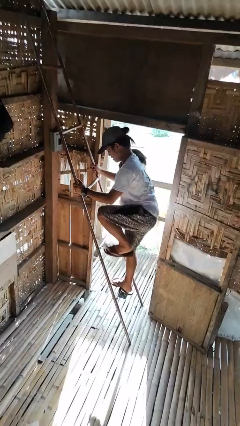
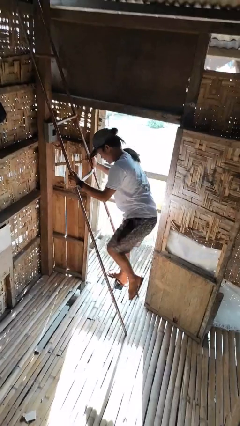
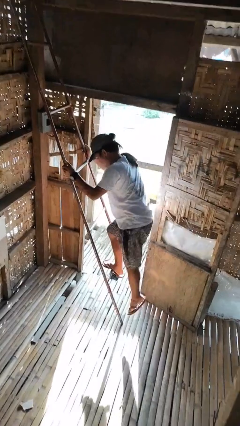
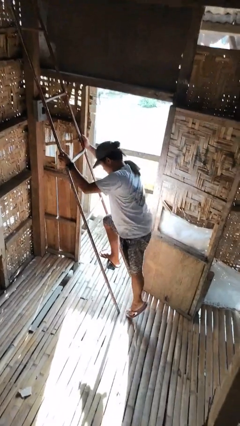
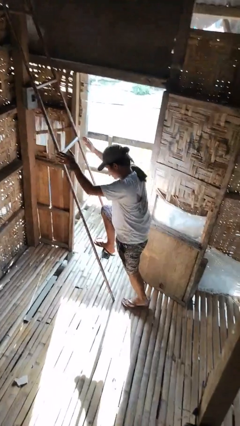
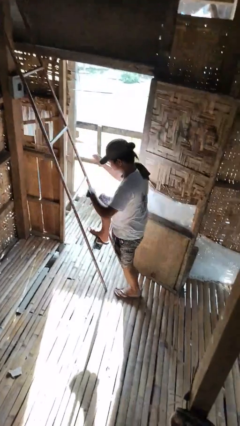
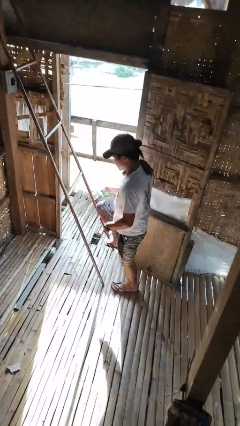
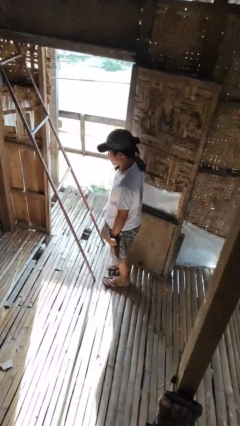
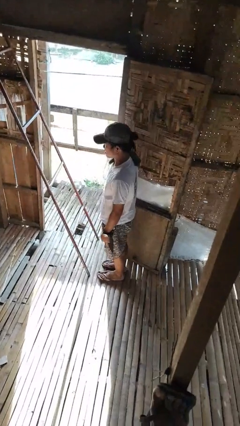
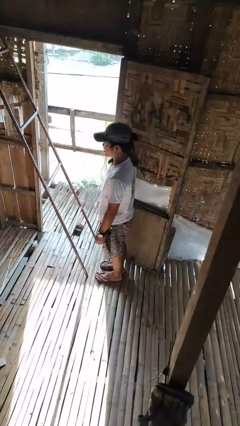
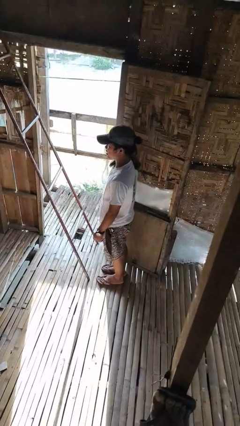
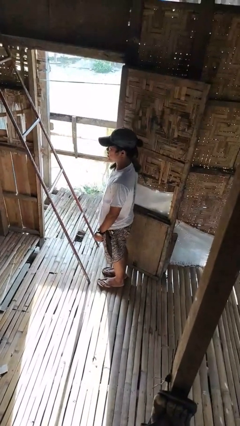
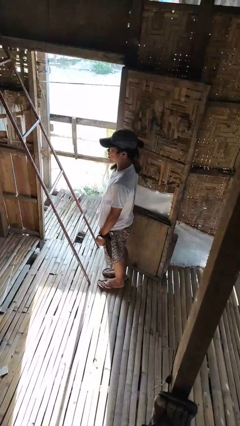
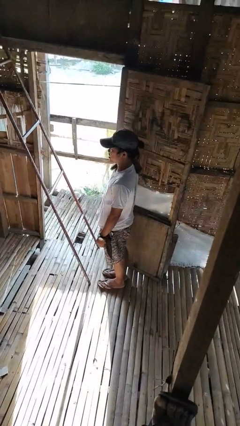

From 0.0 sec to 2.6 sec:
person climbs down ladder

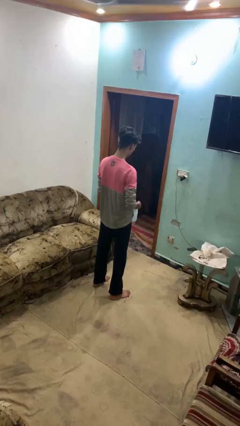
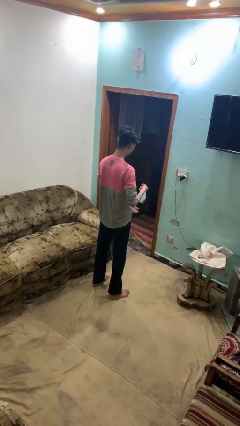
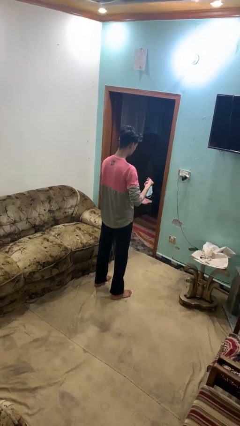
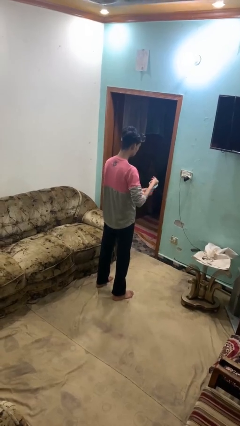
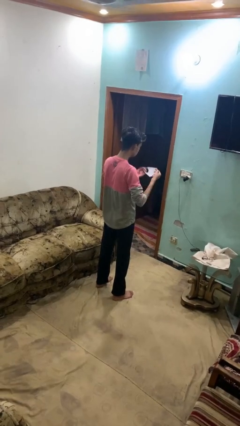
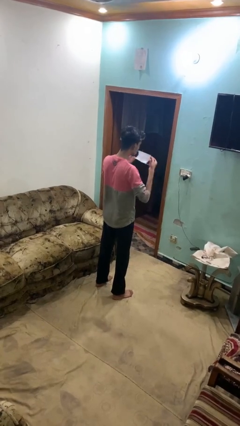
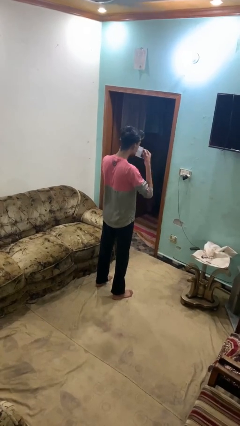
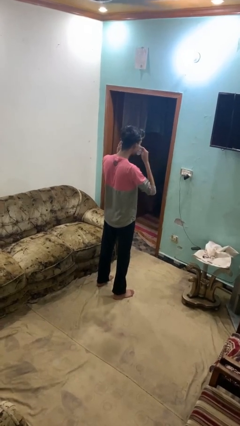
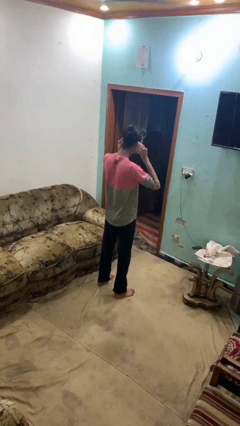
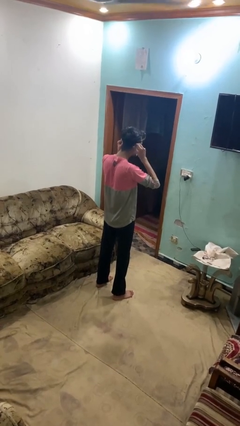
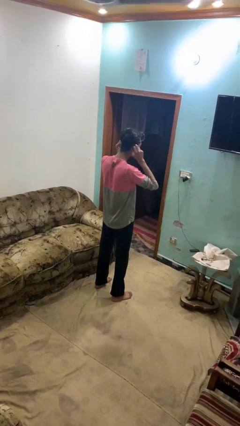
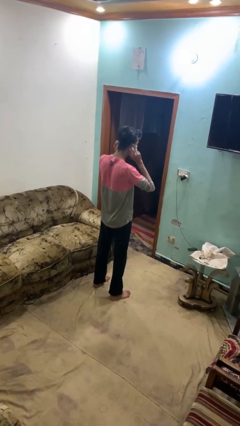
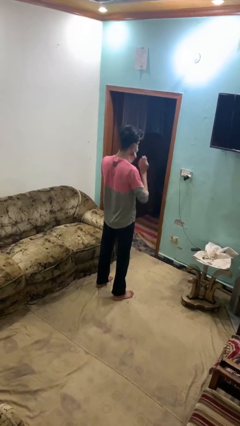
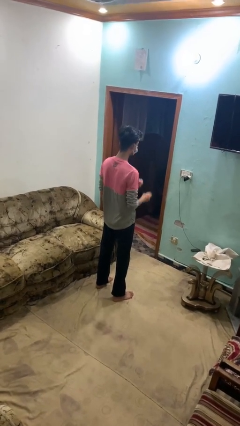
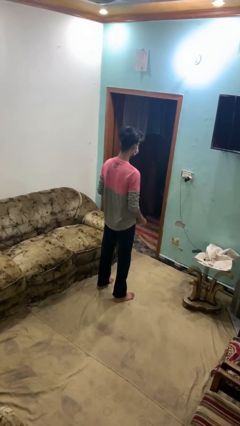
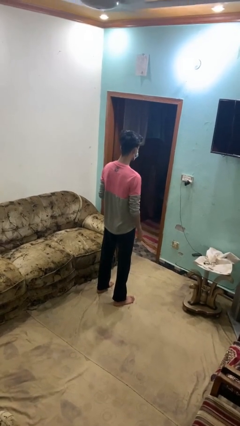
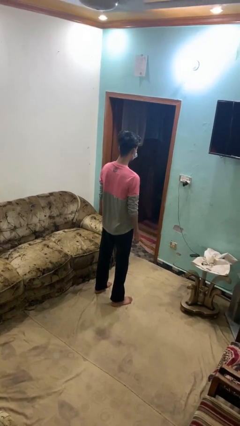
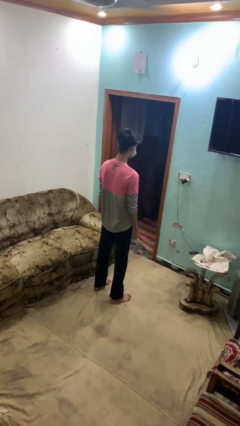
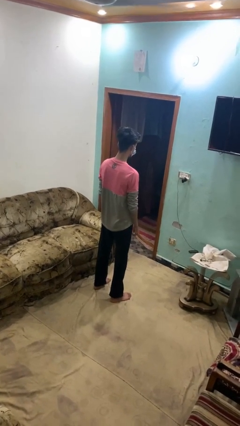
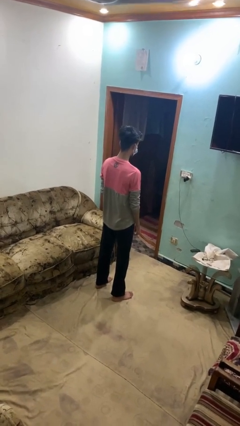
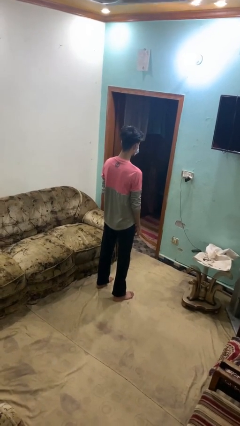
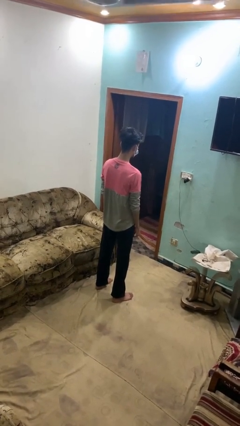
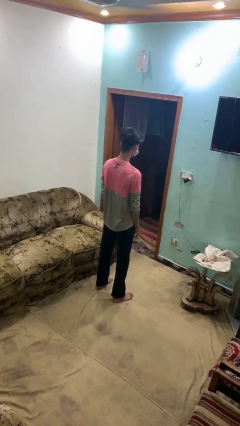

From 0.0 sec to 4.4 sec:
person puts on facemask

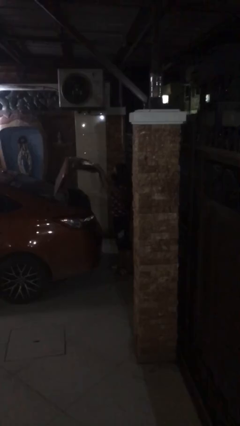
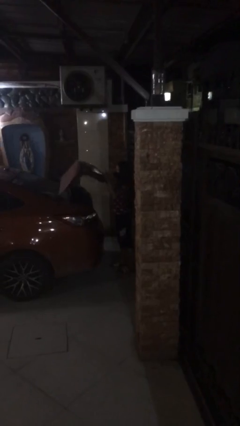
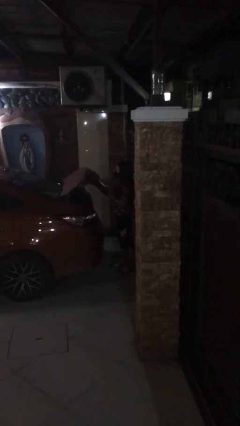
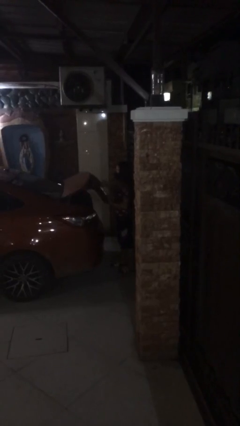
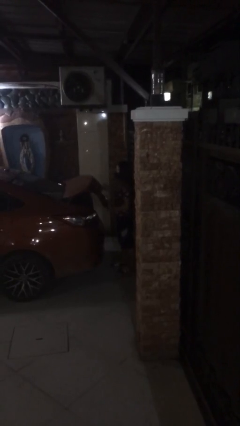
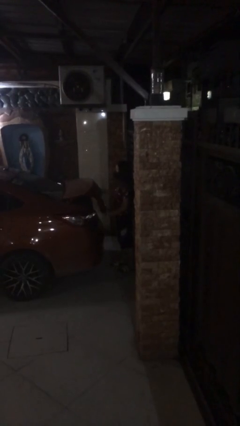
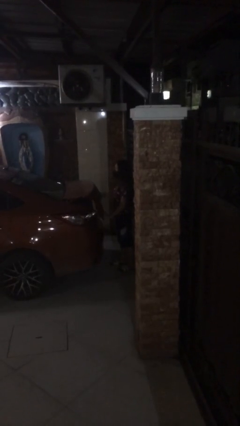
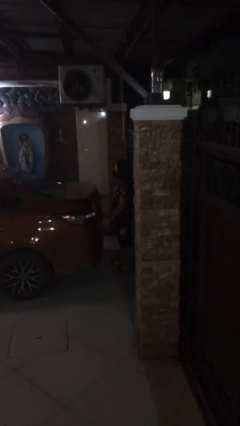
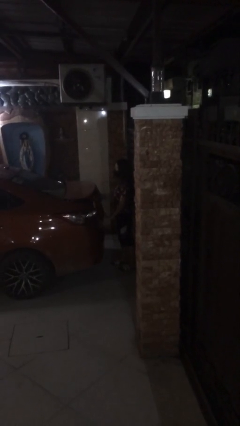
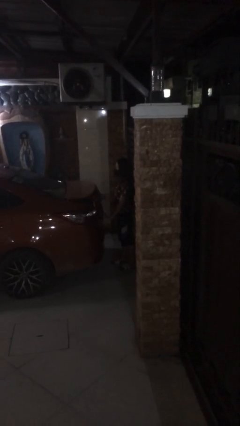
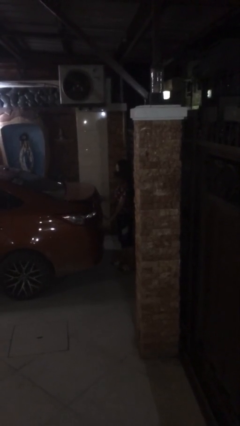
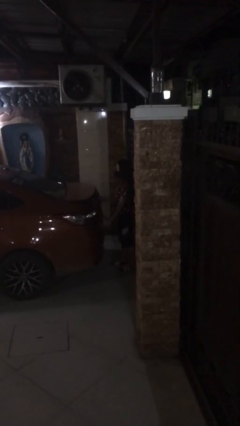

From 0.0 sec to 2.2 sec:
person closes car trunk

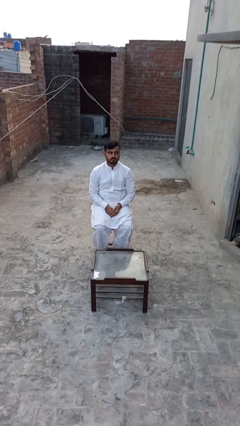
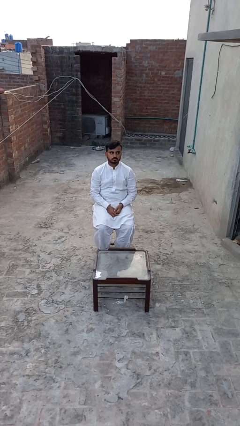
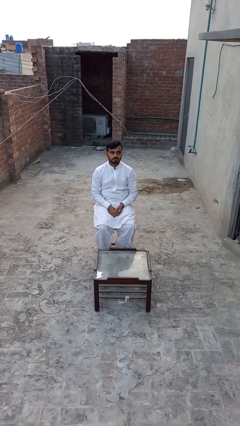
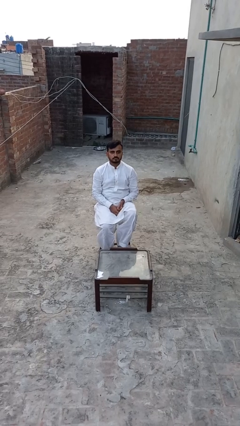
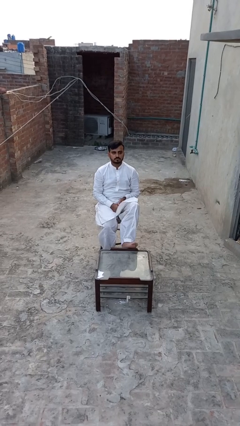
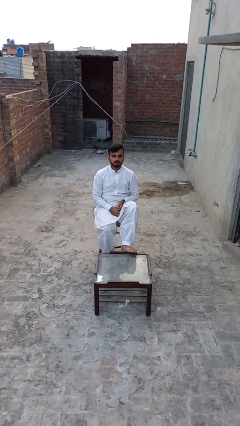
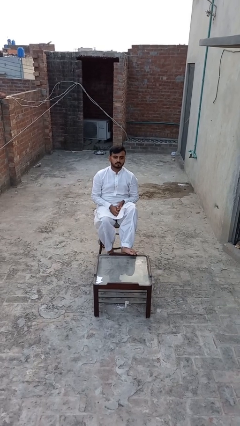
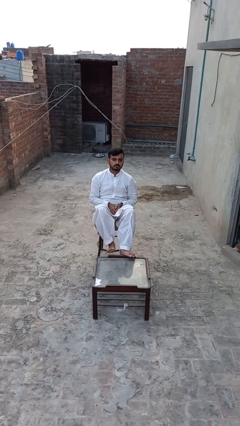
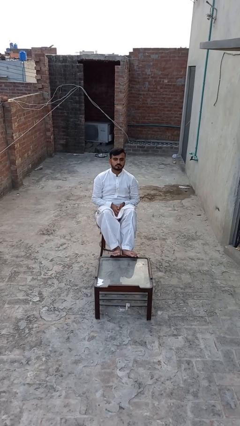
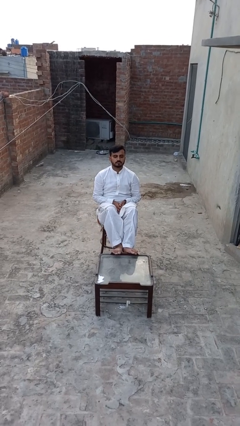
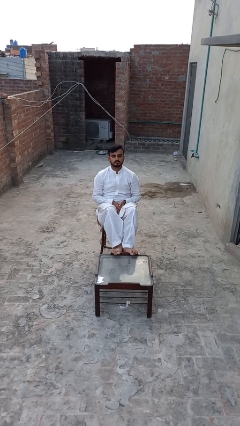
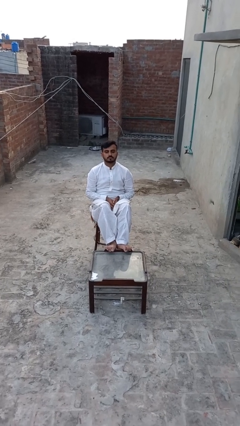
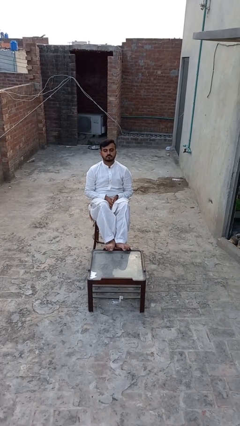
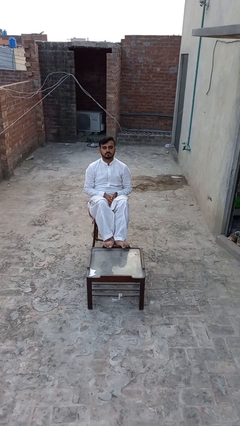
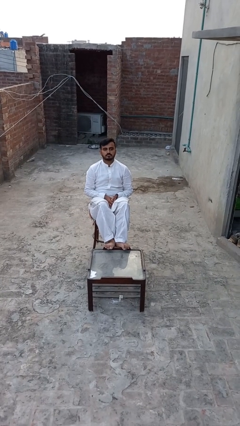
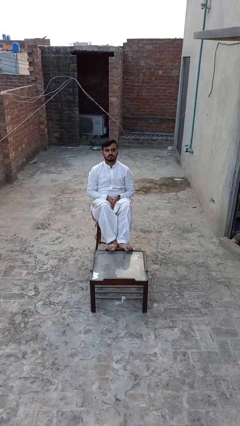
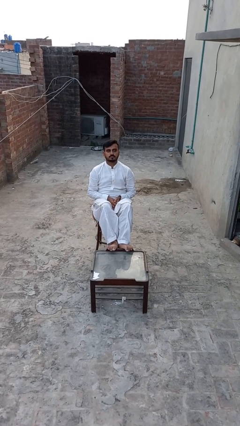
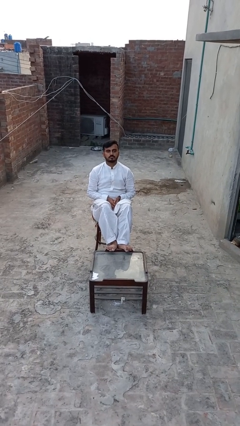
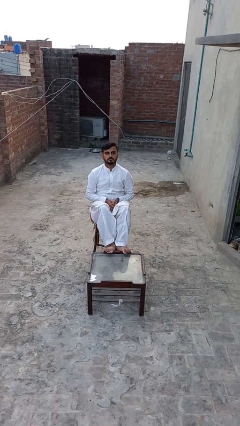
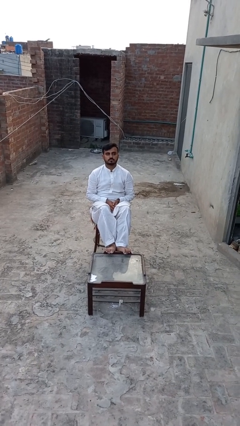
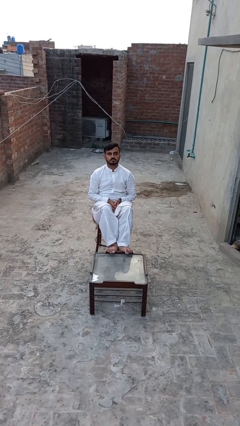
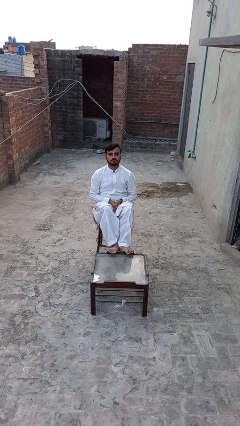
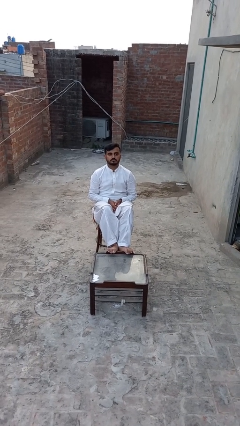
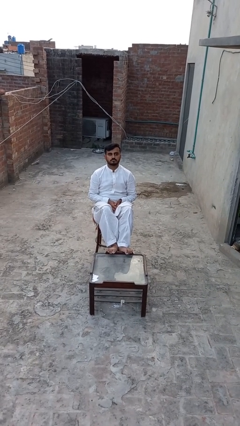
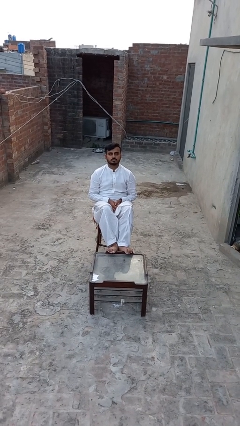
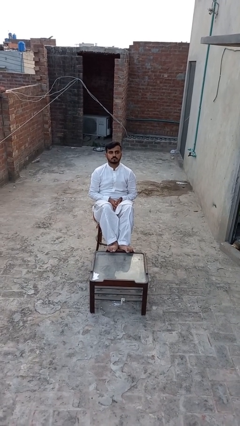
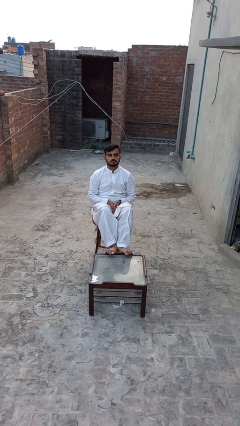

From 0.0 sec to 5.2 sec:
person puts feet up

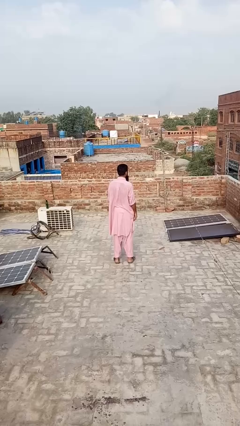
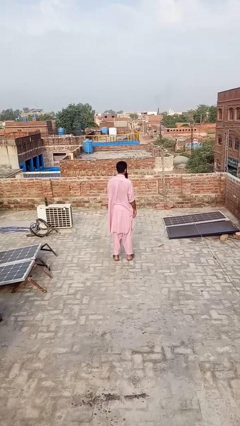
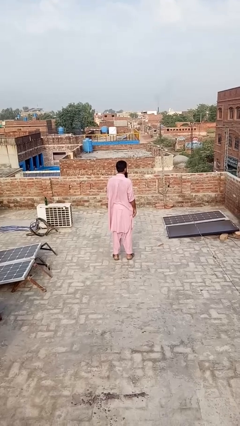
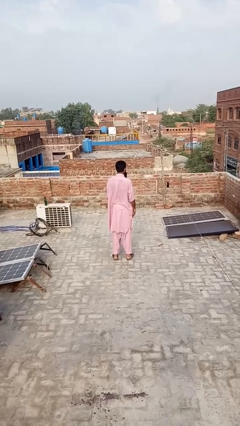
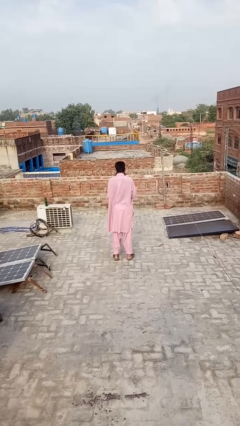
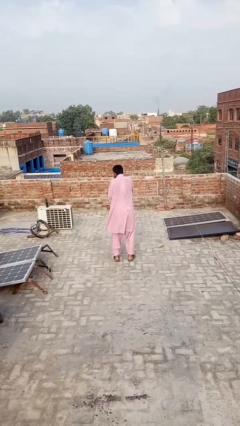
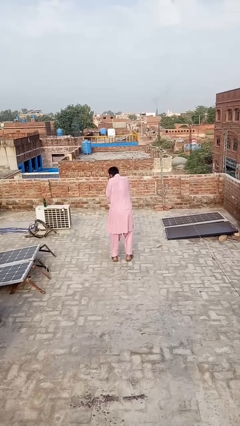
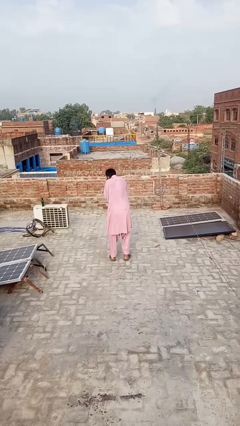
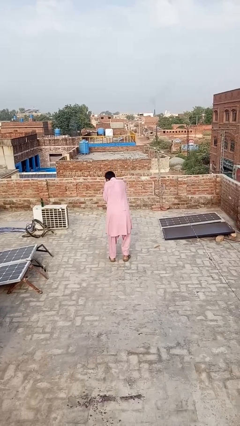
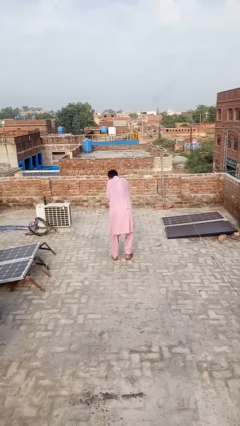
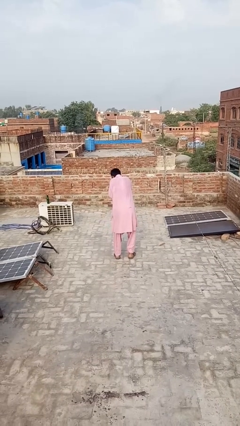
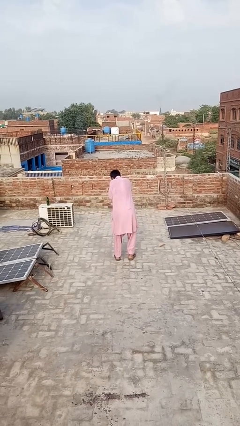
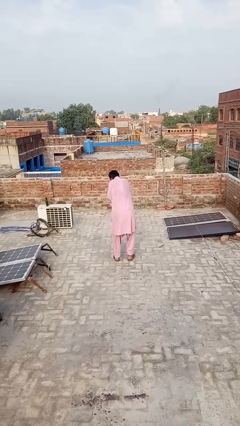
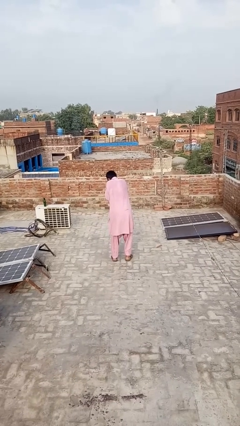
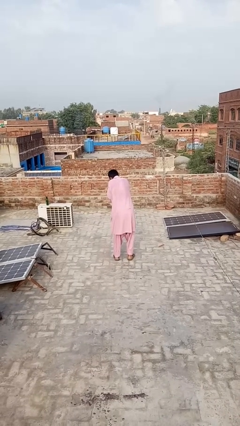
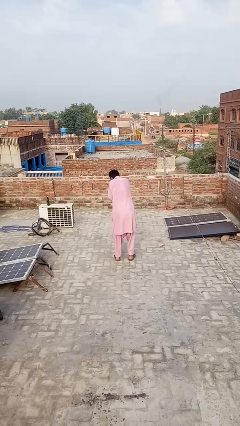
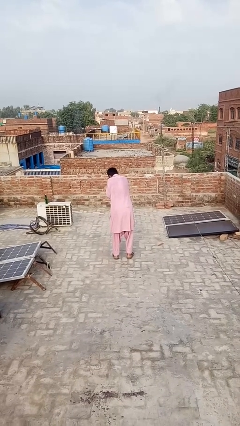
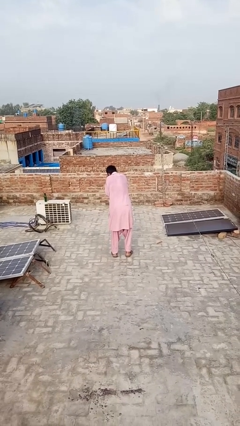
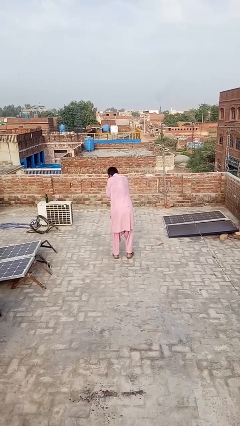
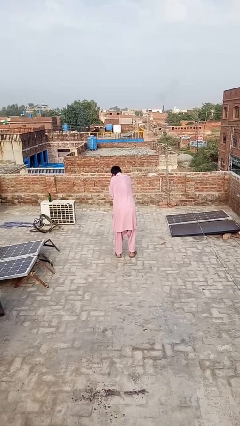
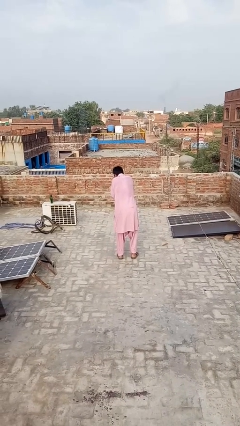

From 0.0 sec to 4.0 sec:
person blows into hands
